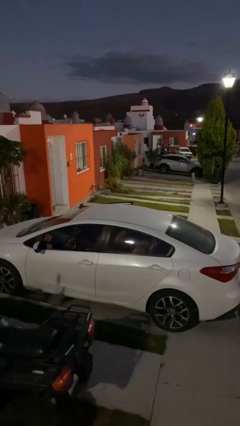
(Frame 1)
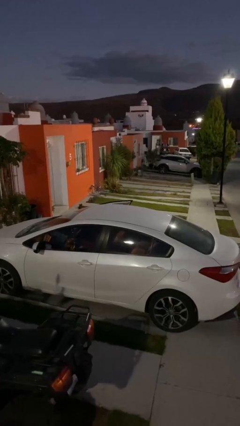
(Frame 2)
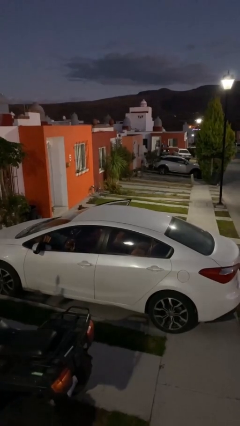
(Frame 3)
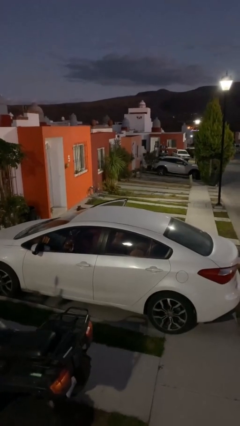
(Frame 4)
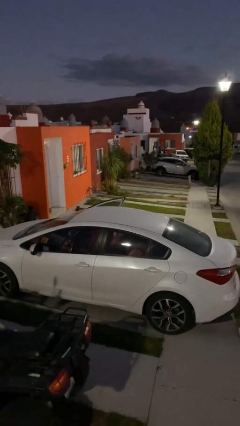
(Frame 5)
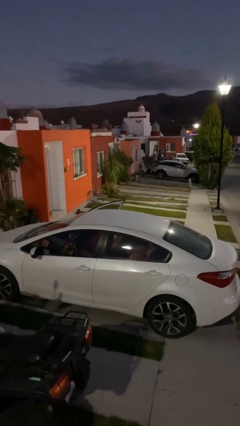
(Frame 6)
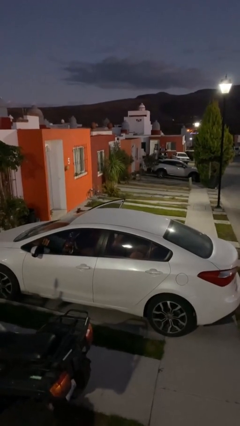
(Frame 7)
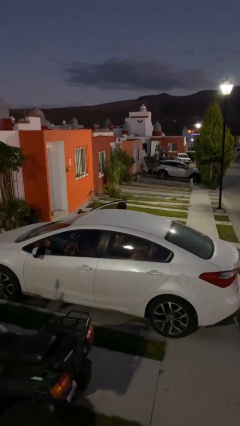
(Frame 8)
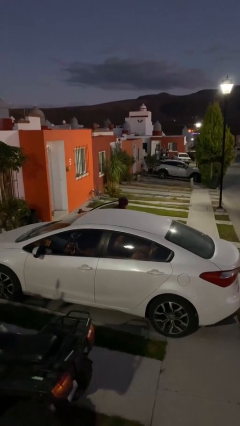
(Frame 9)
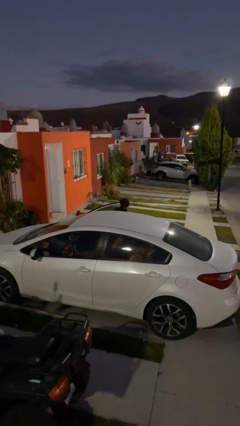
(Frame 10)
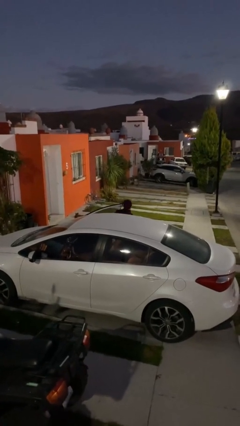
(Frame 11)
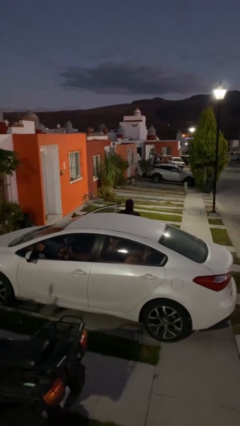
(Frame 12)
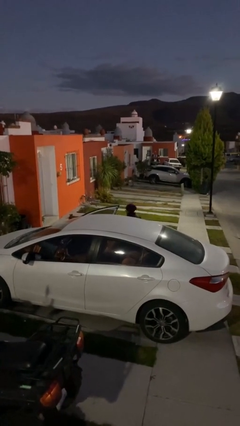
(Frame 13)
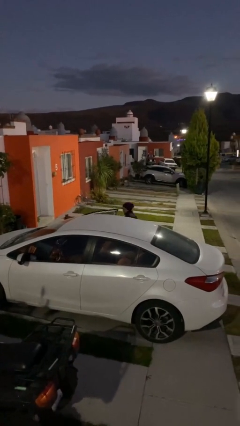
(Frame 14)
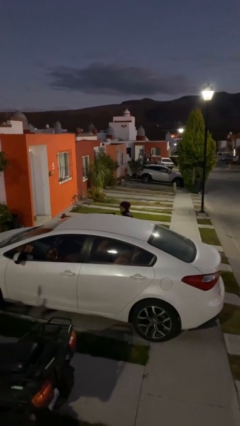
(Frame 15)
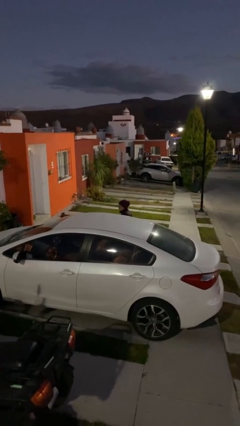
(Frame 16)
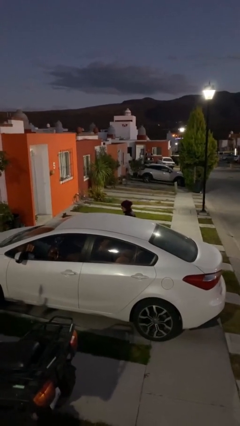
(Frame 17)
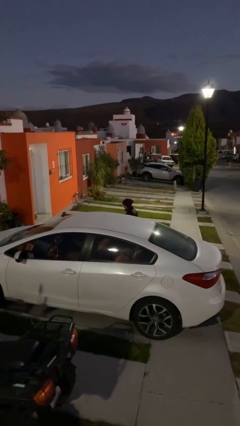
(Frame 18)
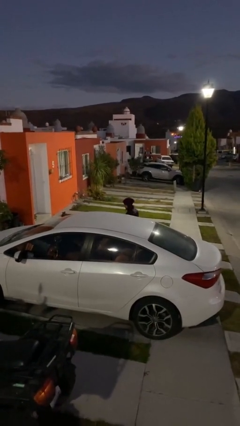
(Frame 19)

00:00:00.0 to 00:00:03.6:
car drops off person

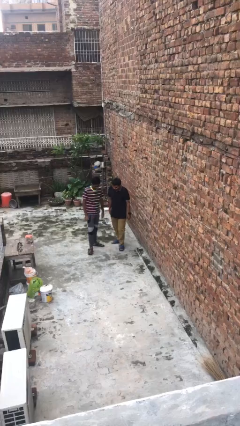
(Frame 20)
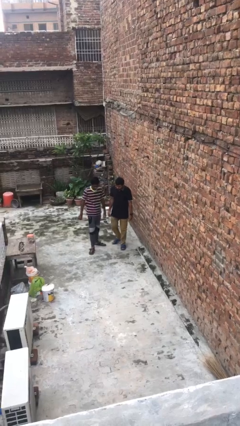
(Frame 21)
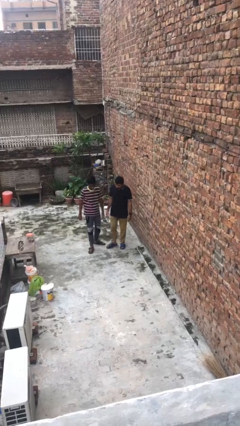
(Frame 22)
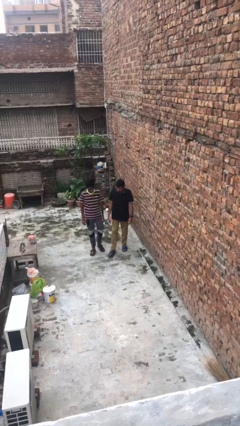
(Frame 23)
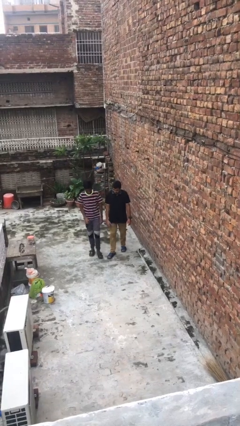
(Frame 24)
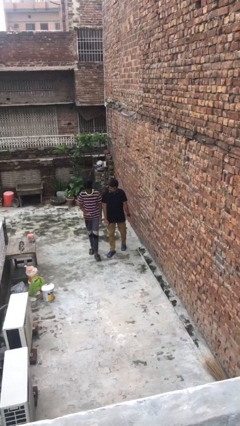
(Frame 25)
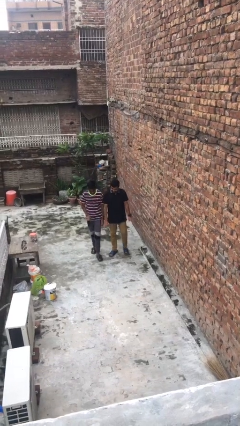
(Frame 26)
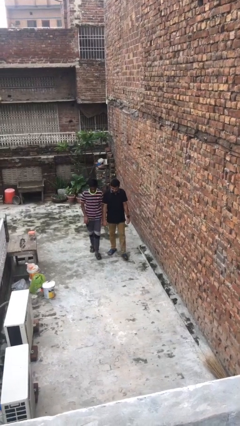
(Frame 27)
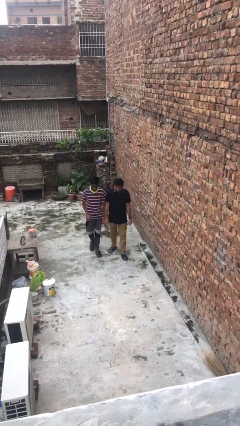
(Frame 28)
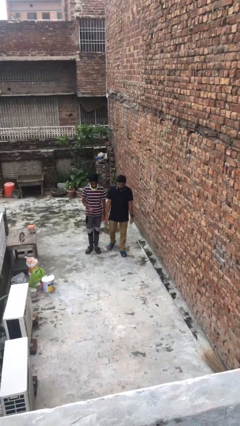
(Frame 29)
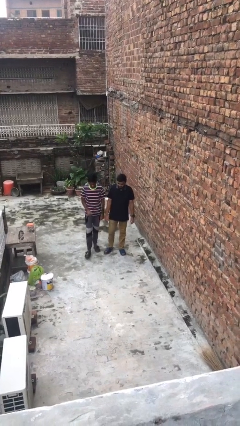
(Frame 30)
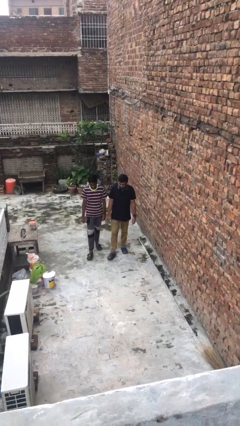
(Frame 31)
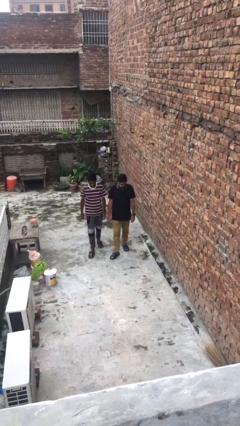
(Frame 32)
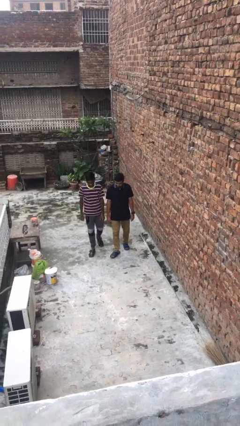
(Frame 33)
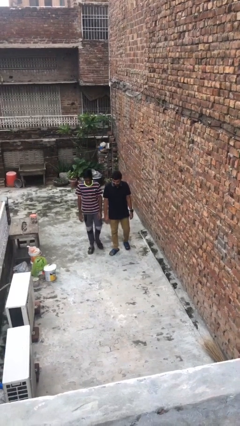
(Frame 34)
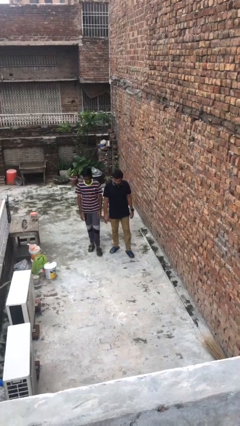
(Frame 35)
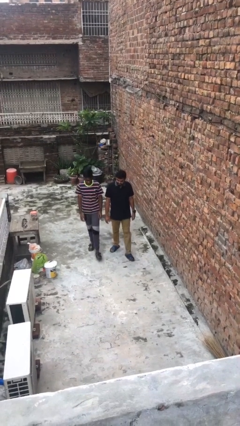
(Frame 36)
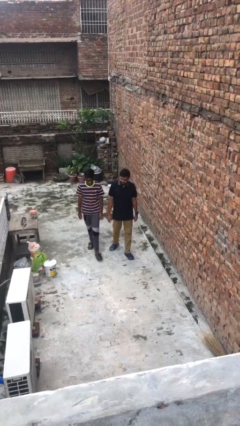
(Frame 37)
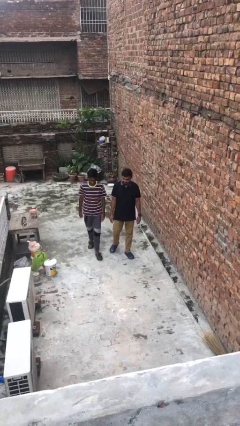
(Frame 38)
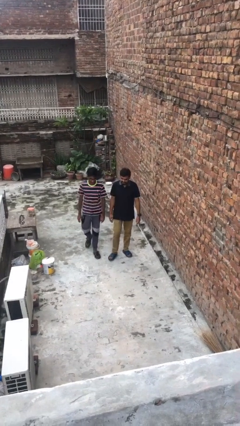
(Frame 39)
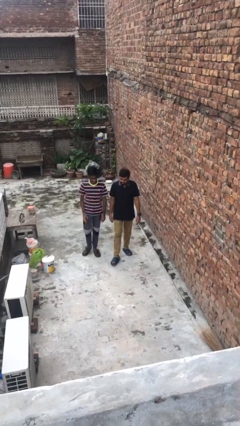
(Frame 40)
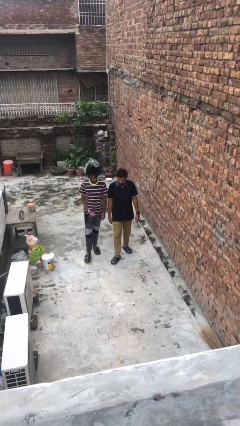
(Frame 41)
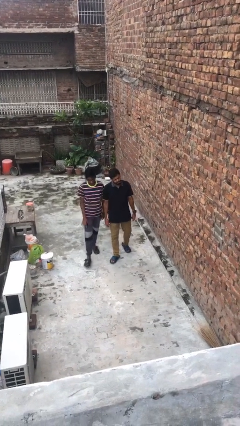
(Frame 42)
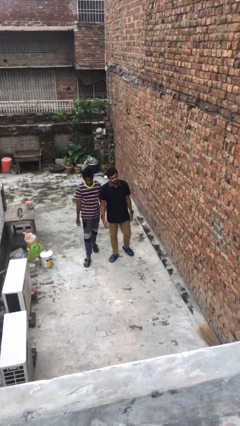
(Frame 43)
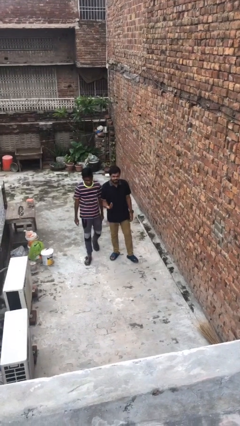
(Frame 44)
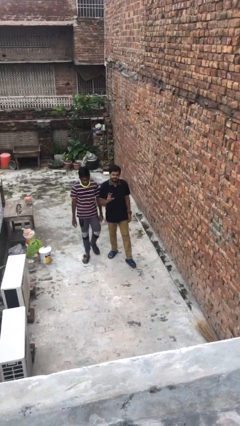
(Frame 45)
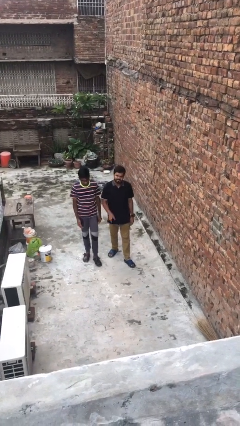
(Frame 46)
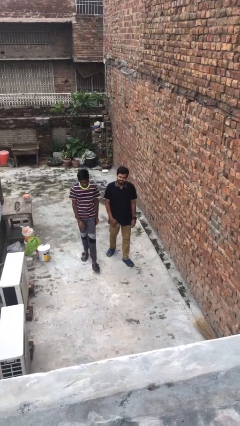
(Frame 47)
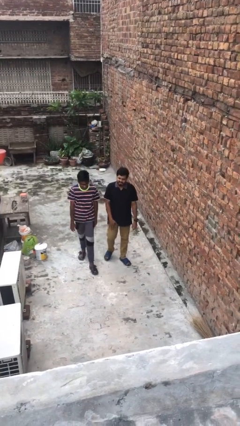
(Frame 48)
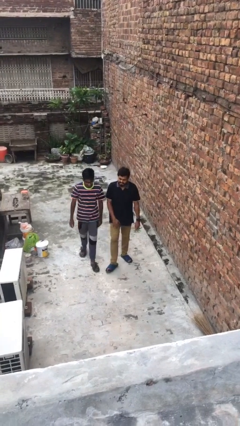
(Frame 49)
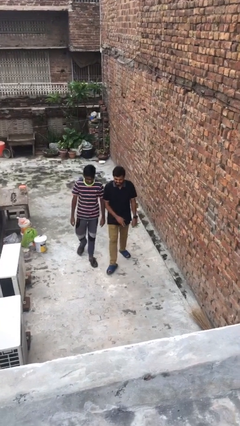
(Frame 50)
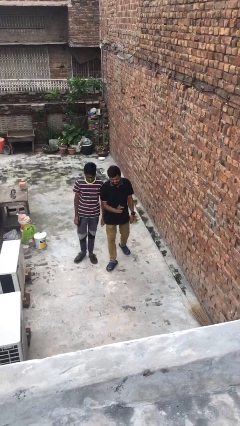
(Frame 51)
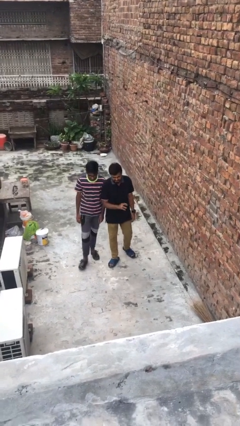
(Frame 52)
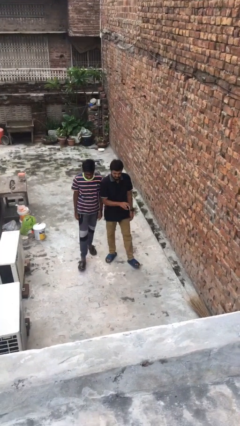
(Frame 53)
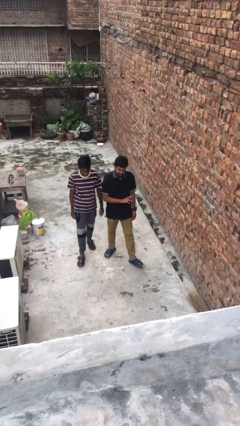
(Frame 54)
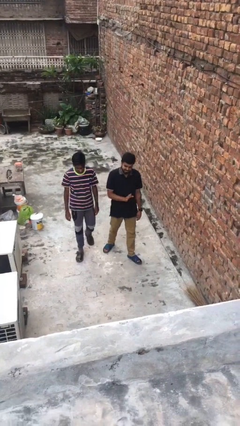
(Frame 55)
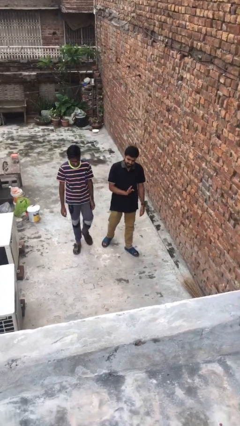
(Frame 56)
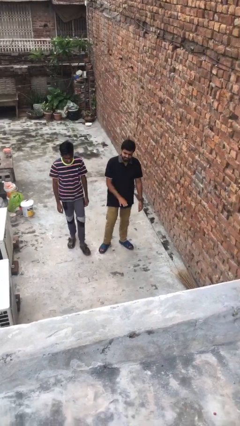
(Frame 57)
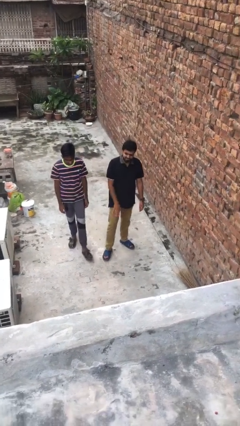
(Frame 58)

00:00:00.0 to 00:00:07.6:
person talks to person

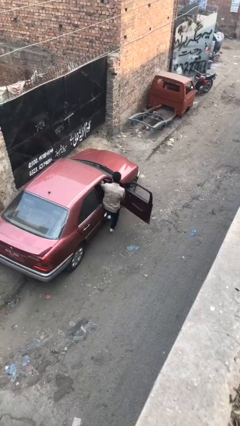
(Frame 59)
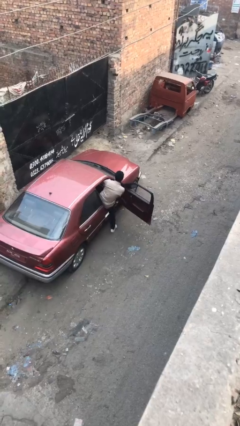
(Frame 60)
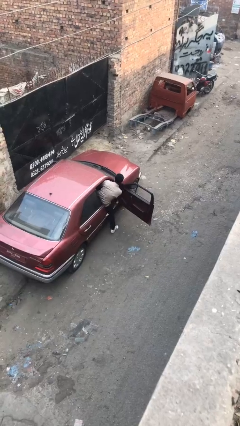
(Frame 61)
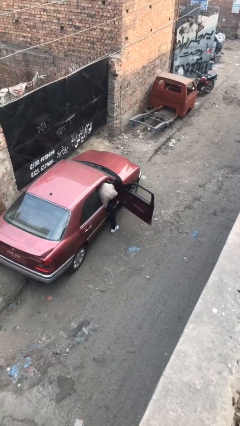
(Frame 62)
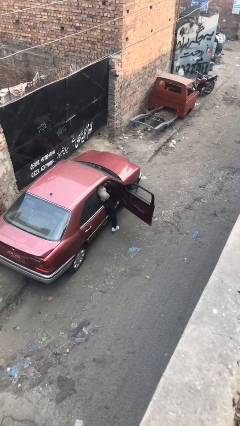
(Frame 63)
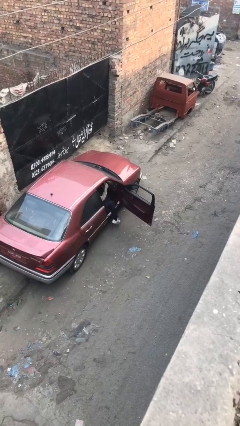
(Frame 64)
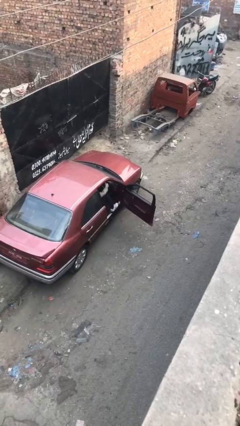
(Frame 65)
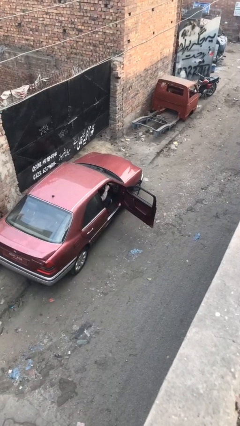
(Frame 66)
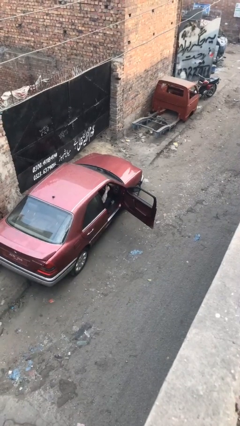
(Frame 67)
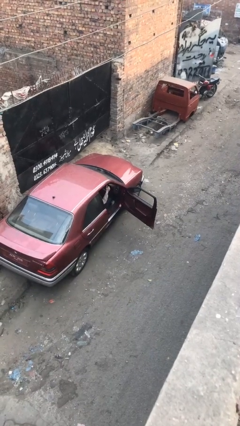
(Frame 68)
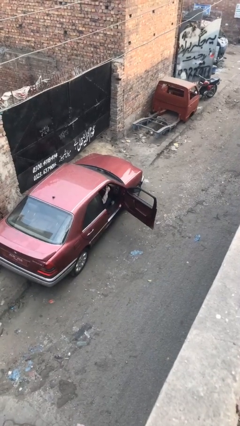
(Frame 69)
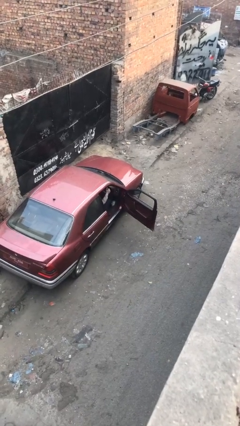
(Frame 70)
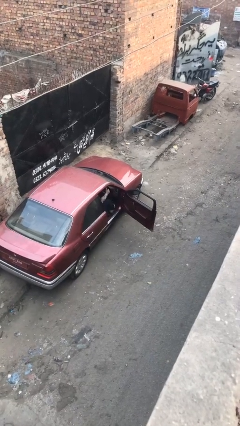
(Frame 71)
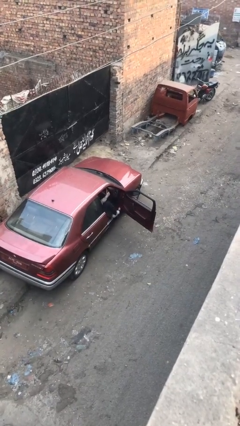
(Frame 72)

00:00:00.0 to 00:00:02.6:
person enters car

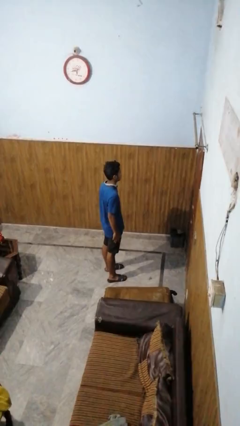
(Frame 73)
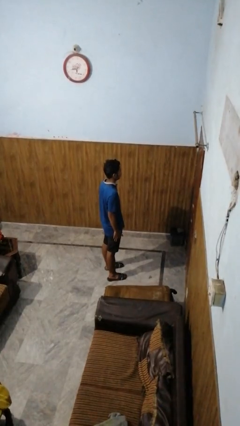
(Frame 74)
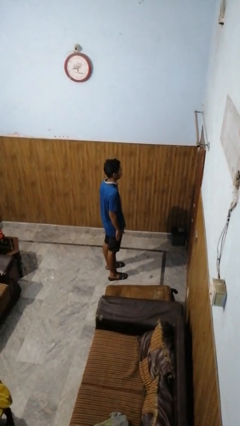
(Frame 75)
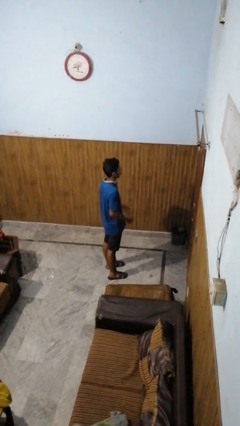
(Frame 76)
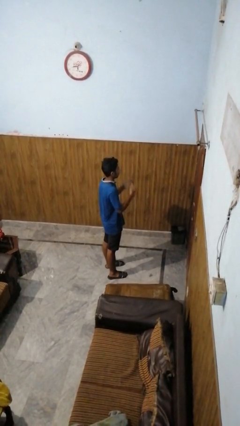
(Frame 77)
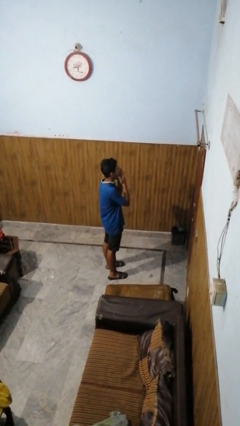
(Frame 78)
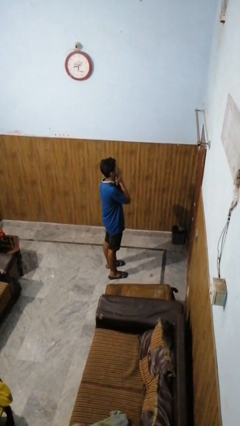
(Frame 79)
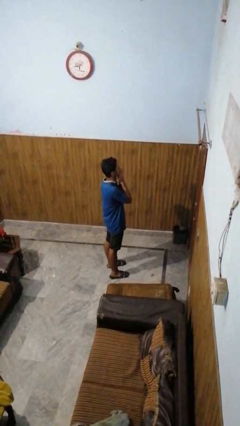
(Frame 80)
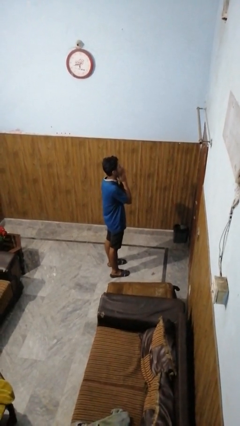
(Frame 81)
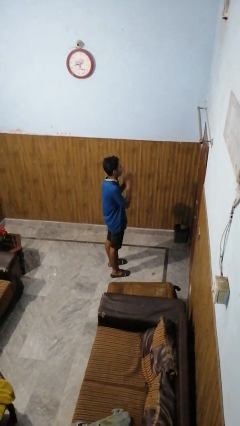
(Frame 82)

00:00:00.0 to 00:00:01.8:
person covers face with hands

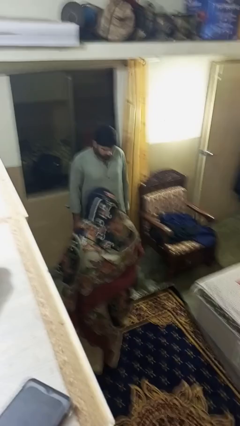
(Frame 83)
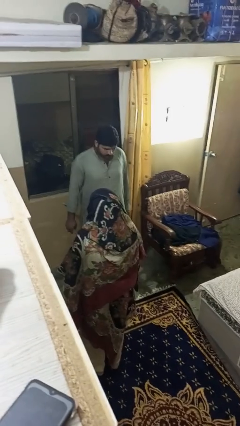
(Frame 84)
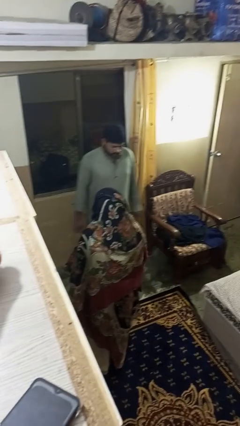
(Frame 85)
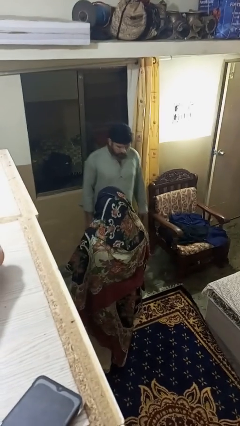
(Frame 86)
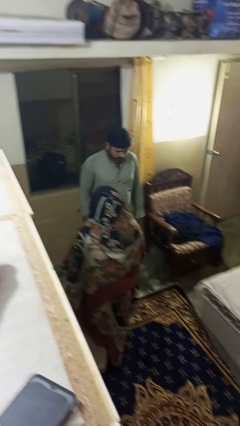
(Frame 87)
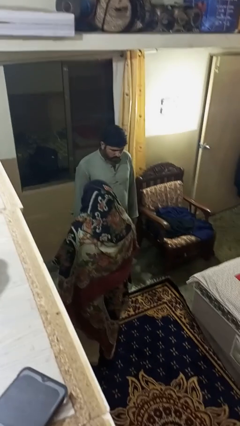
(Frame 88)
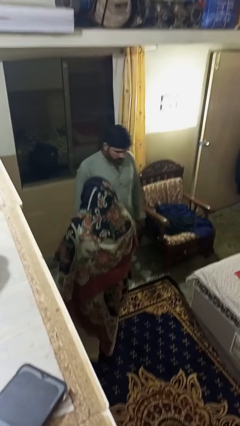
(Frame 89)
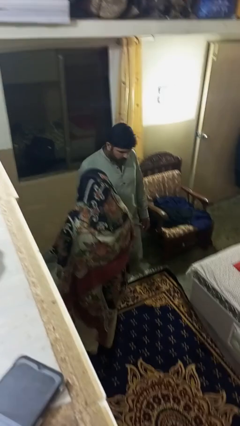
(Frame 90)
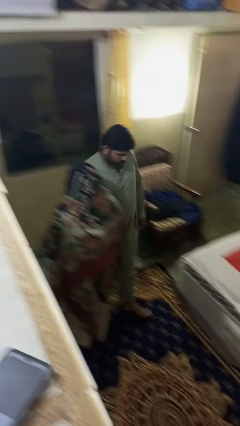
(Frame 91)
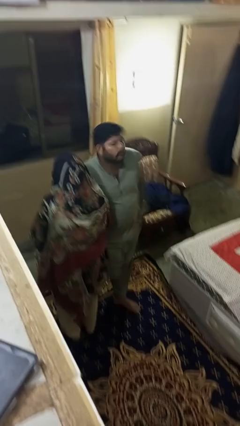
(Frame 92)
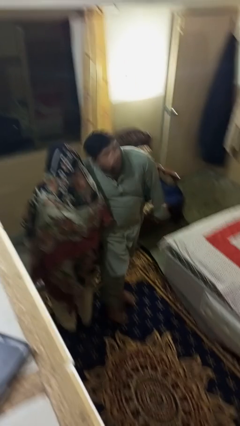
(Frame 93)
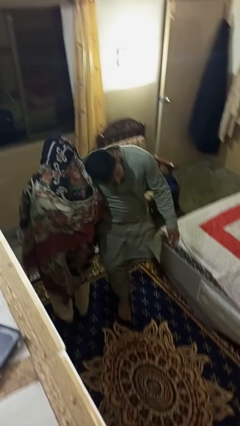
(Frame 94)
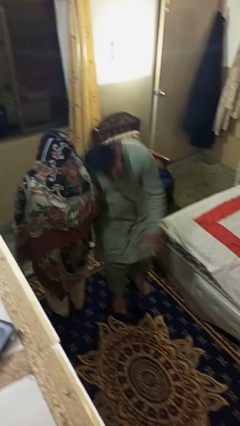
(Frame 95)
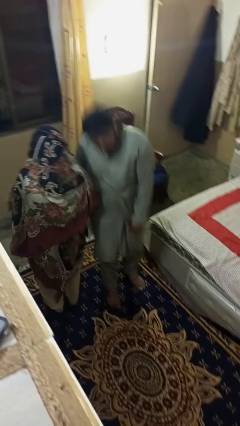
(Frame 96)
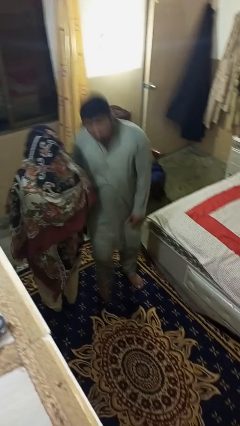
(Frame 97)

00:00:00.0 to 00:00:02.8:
person bumps into person
